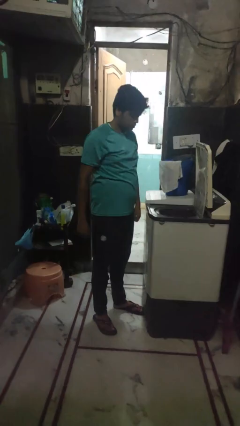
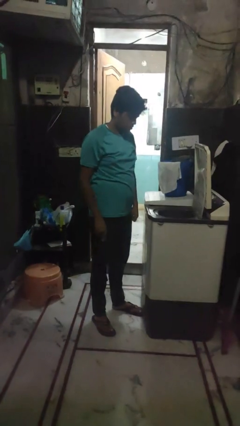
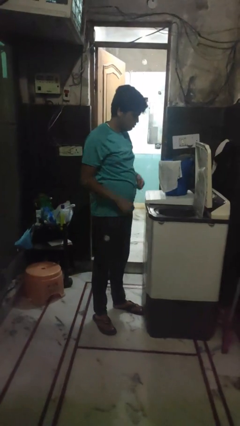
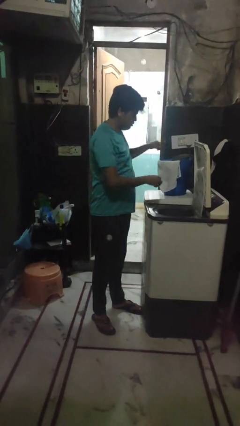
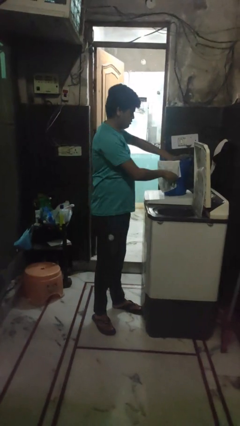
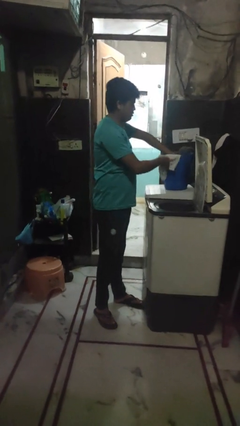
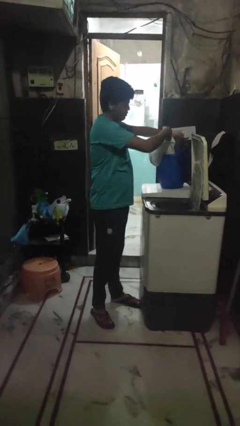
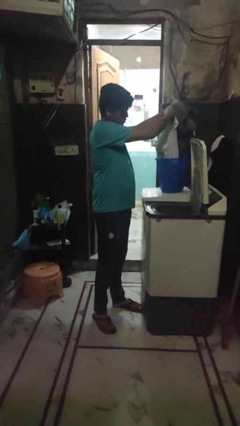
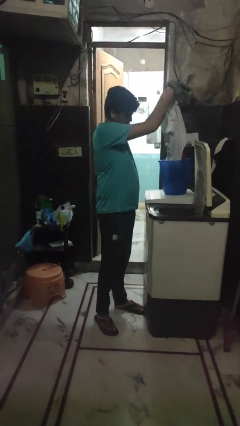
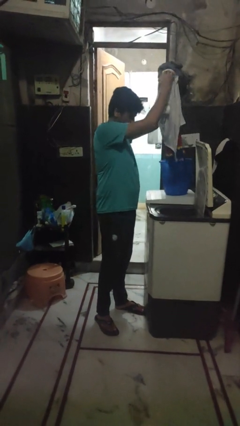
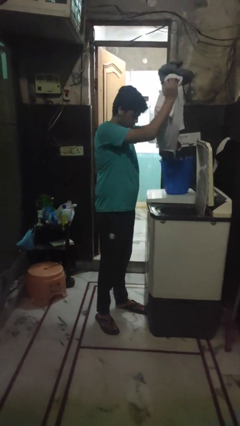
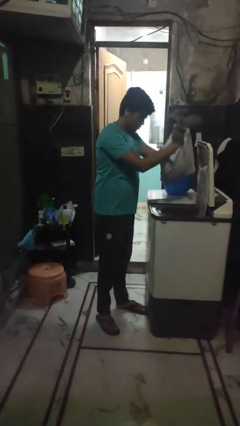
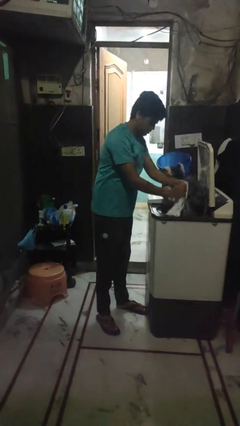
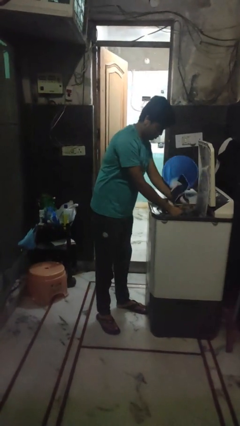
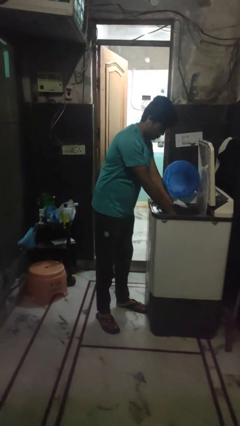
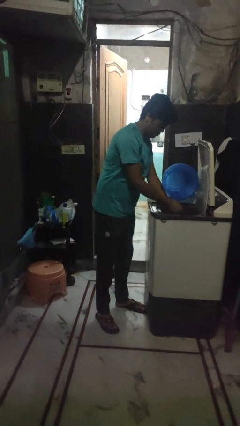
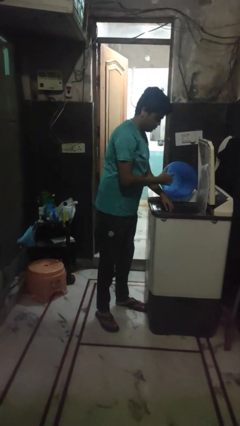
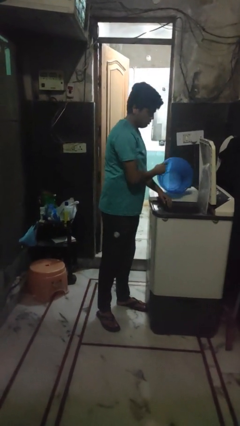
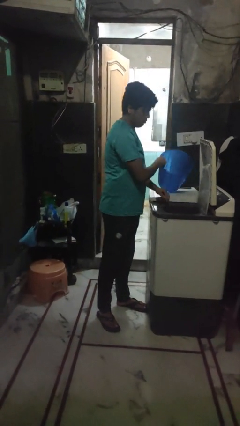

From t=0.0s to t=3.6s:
person loads clotheswasher

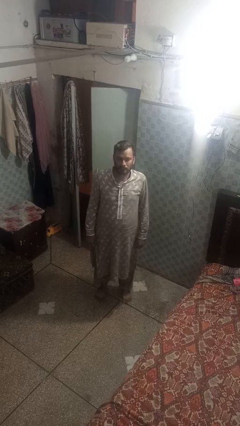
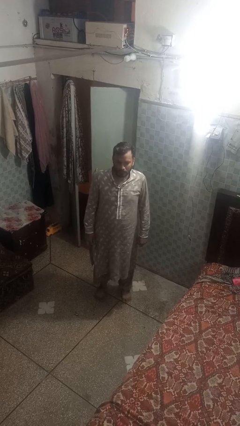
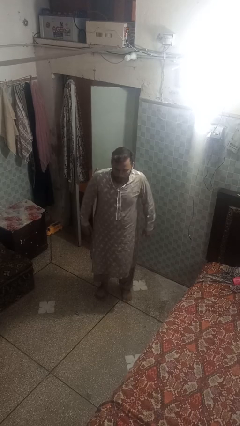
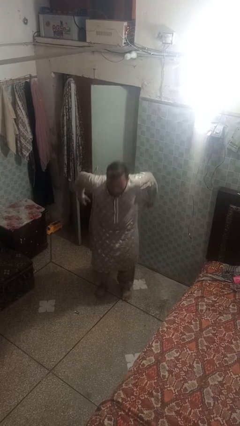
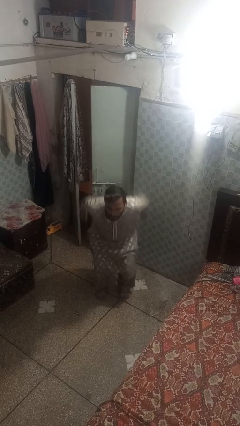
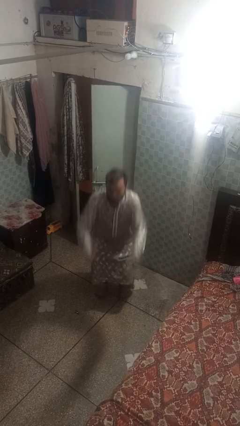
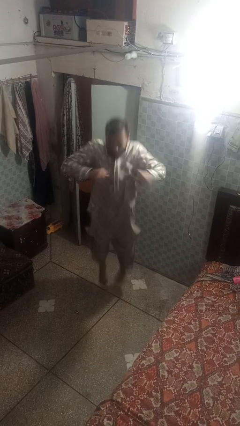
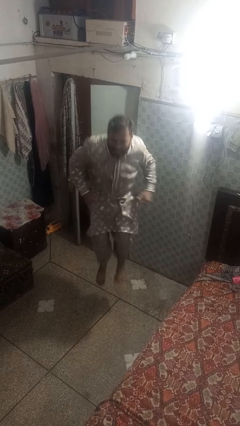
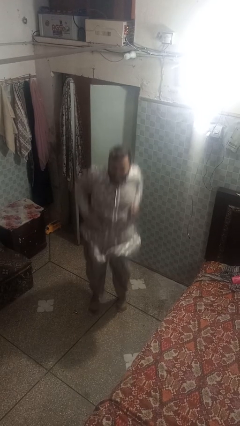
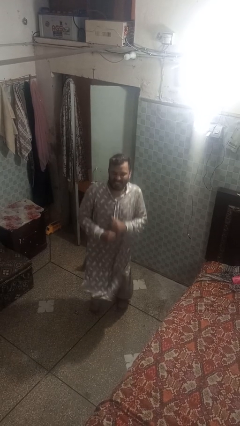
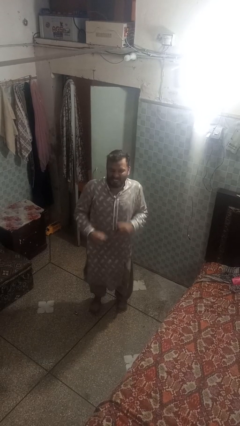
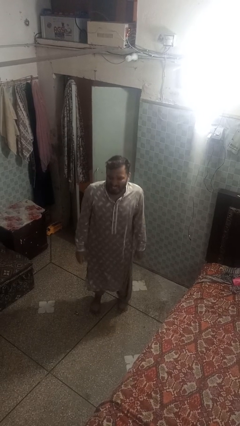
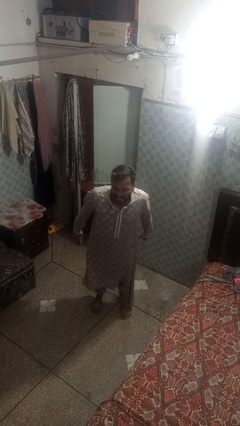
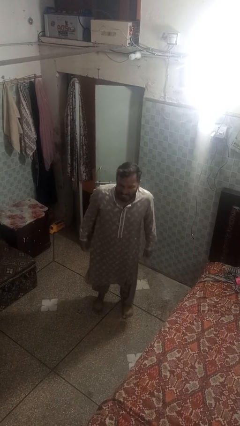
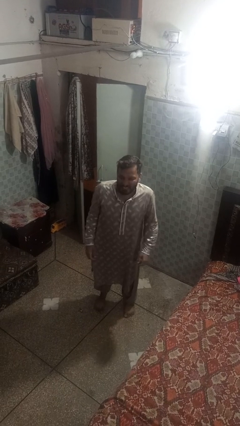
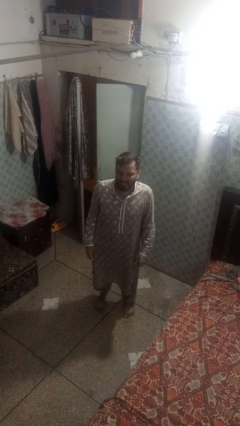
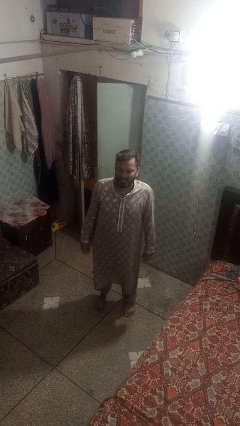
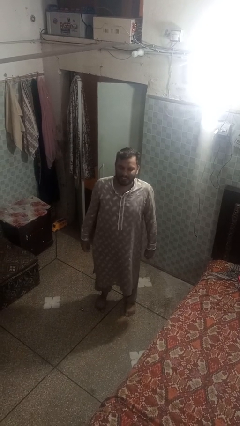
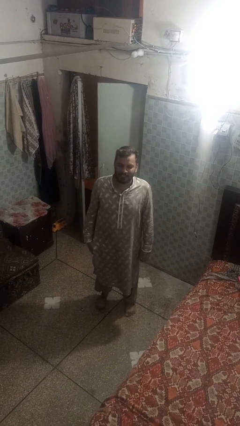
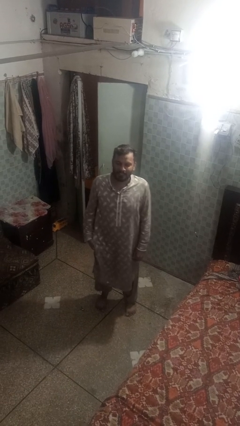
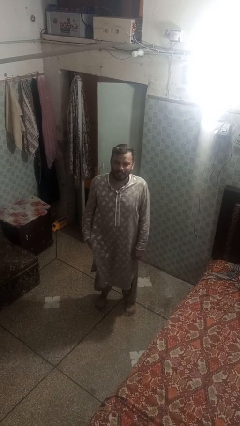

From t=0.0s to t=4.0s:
person jumps

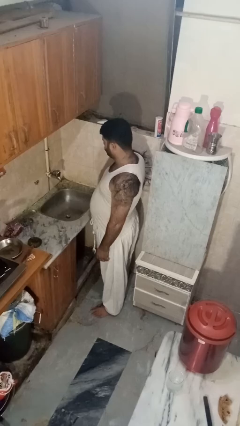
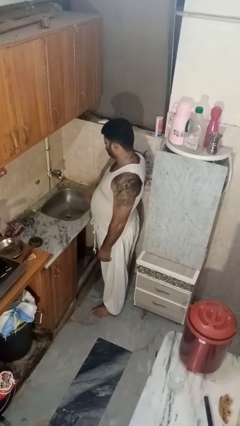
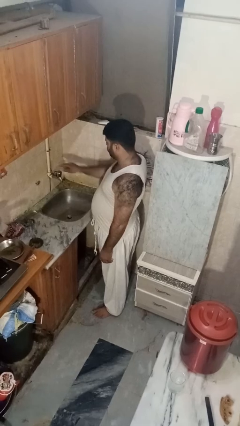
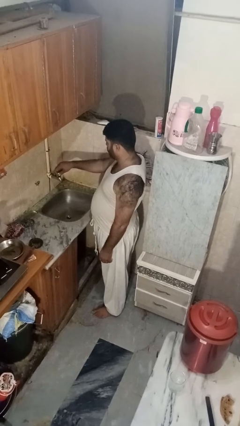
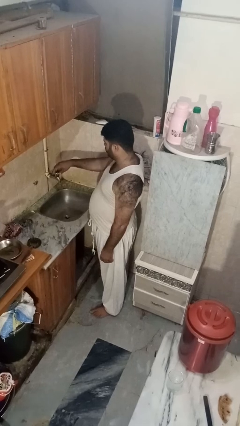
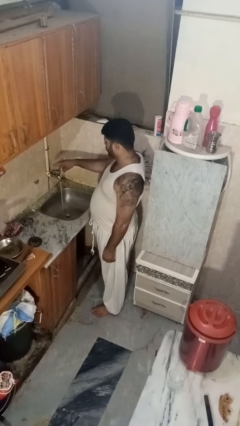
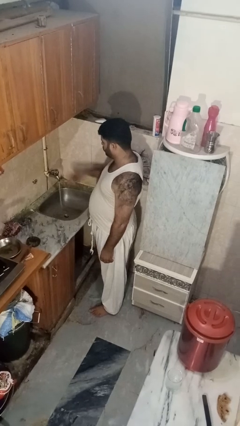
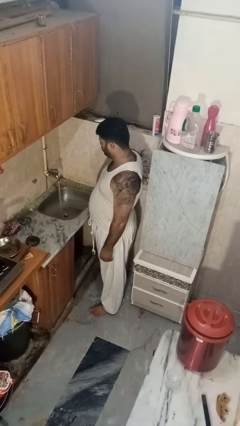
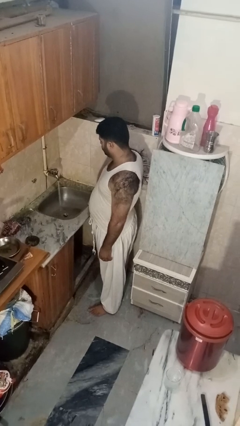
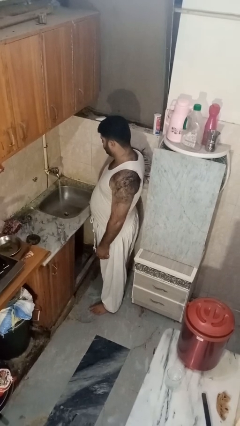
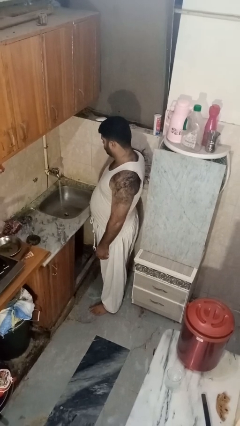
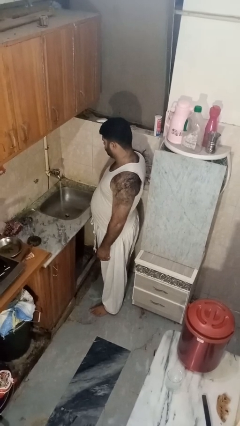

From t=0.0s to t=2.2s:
person turns on faucet

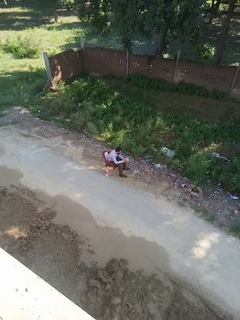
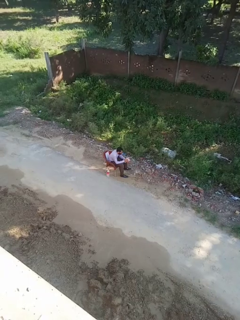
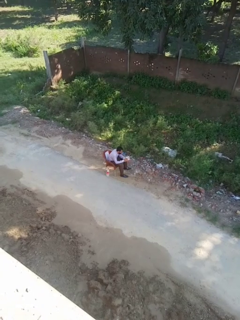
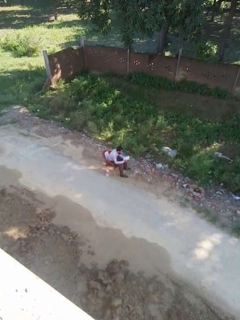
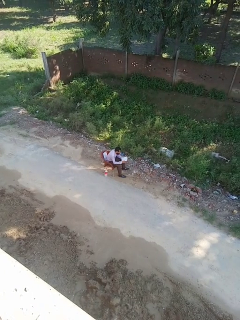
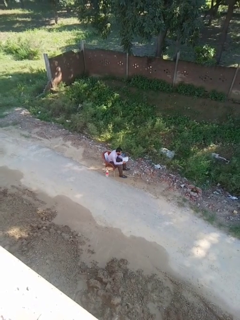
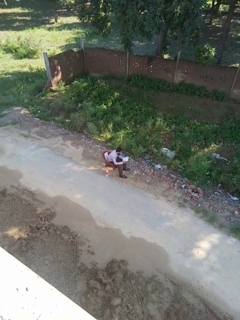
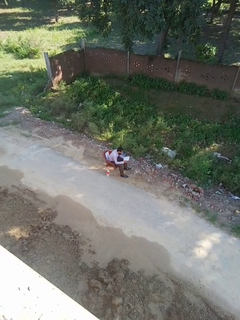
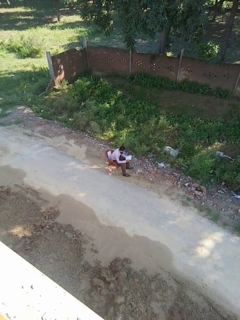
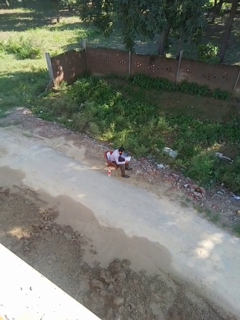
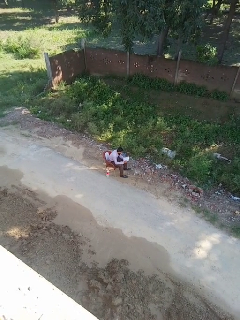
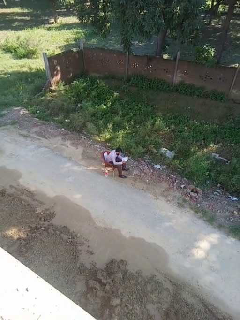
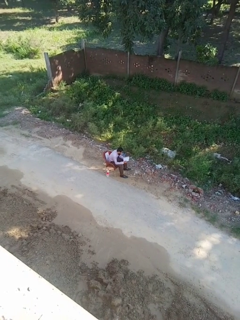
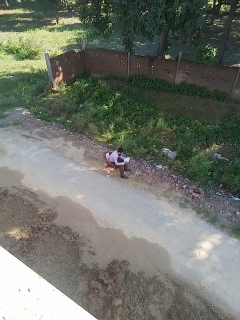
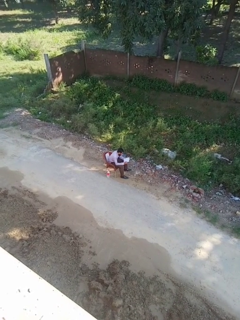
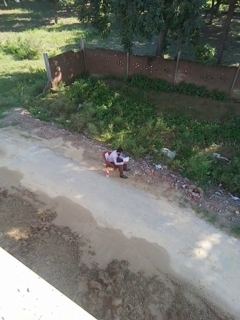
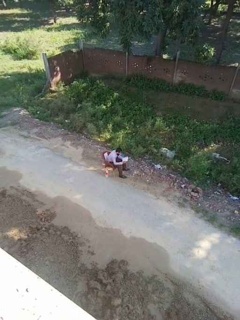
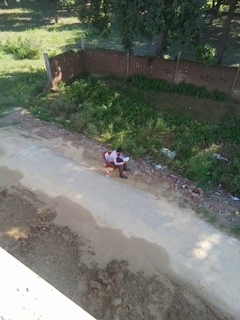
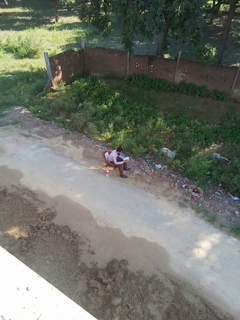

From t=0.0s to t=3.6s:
person reads book

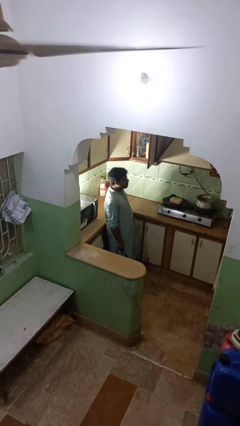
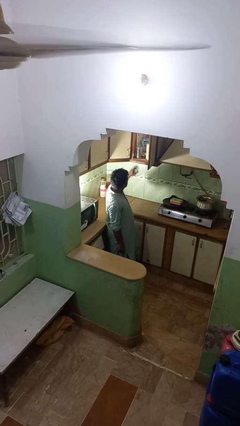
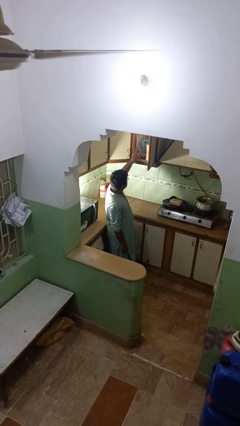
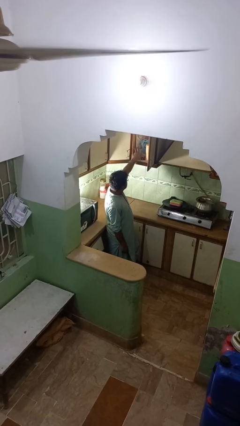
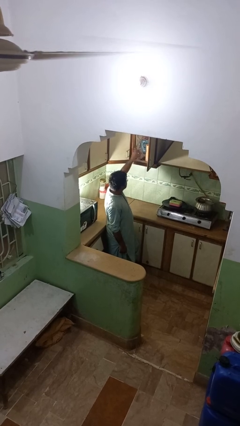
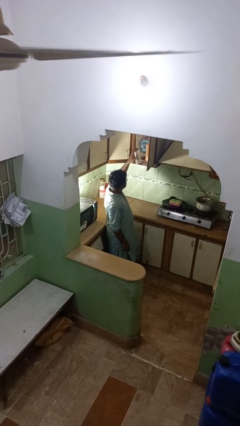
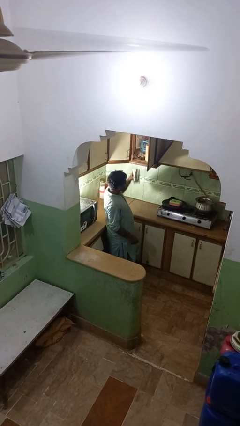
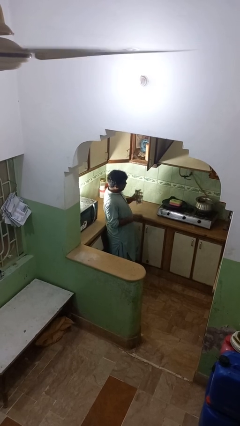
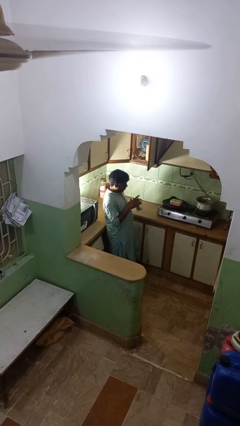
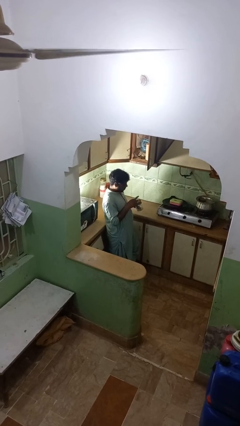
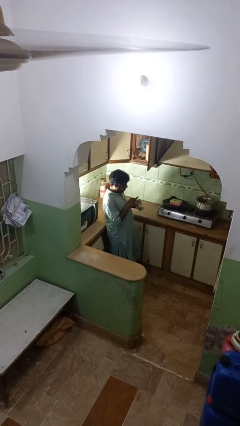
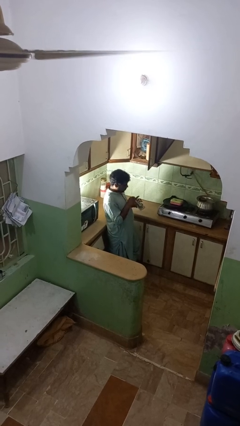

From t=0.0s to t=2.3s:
person takes object from kitchen drawer

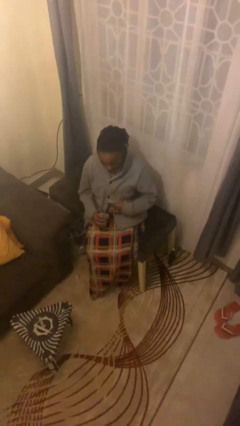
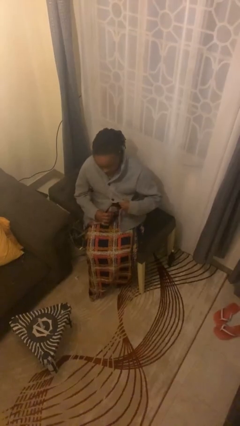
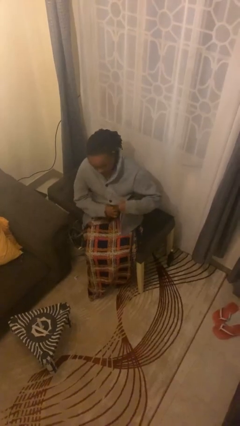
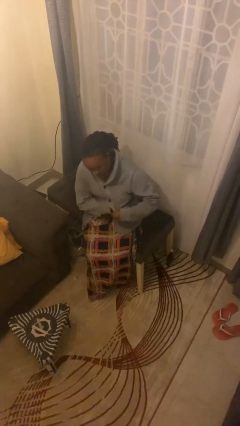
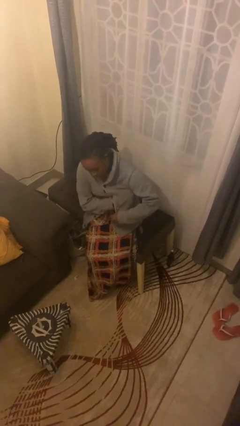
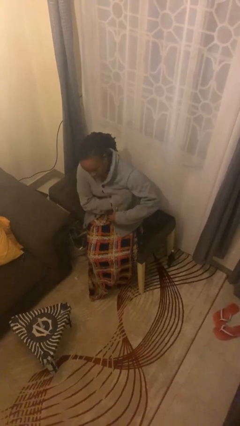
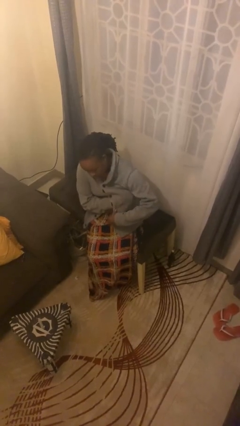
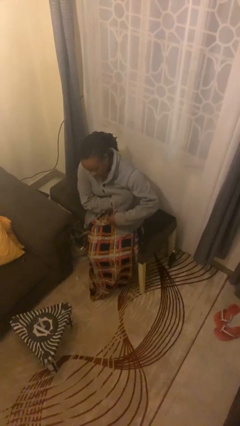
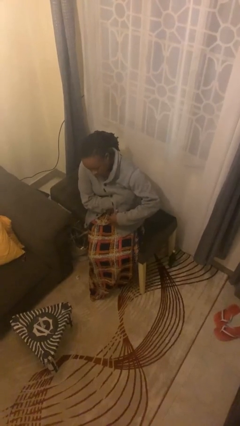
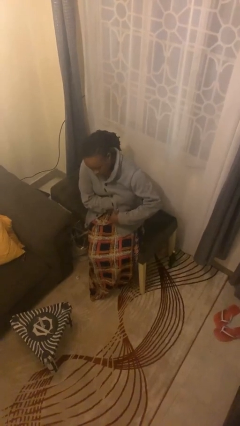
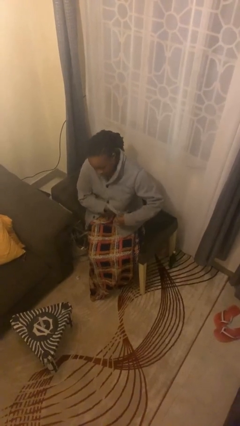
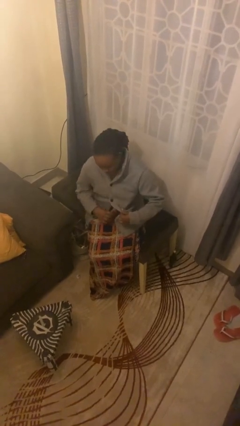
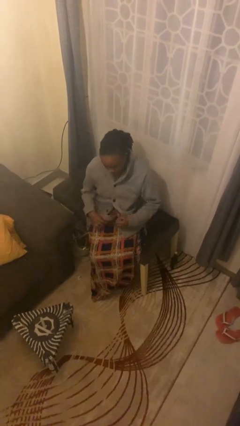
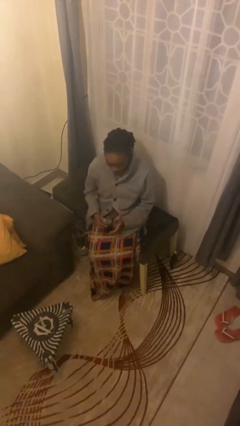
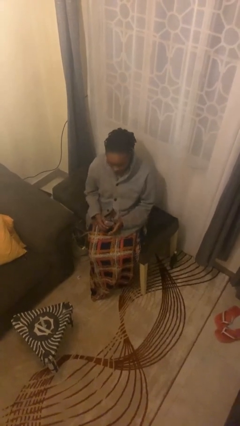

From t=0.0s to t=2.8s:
person applies deodorant
